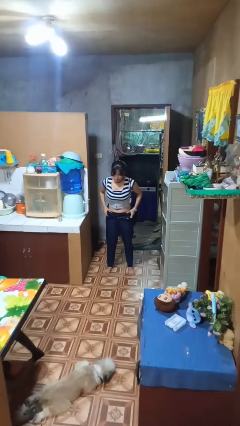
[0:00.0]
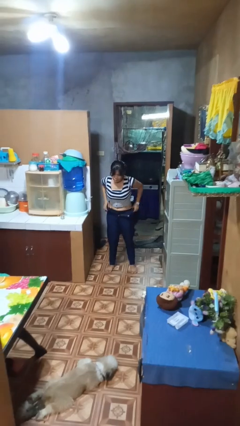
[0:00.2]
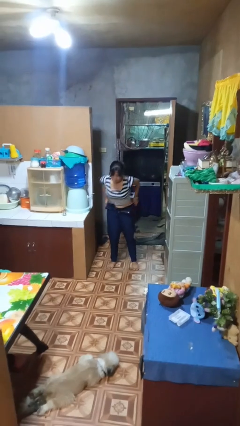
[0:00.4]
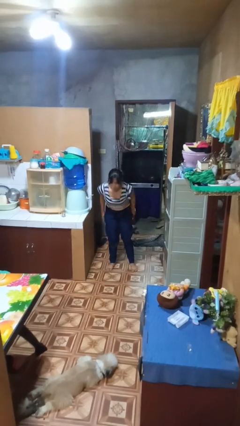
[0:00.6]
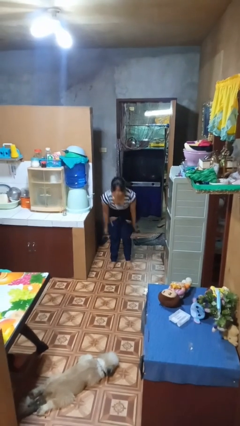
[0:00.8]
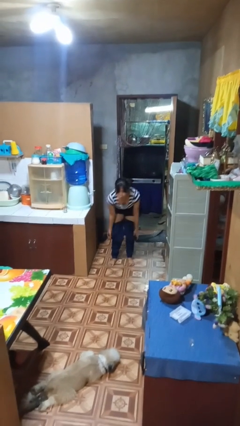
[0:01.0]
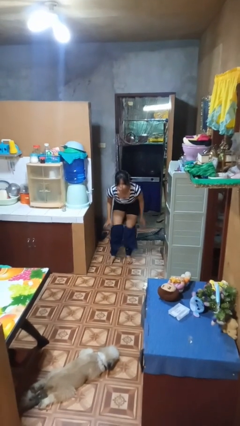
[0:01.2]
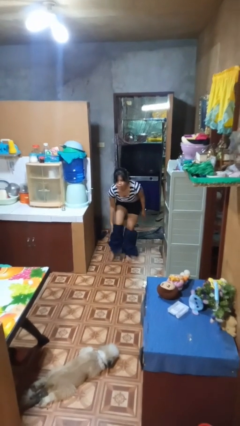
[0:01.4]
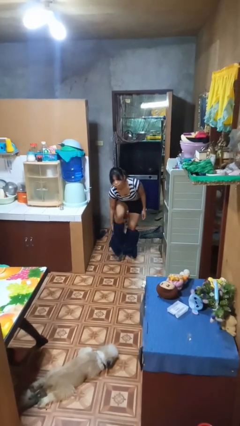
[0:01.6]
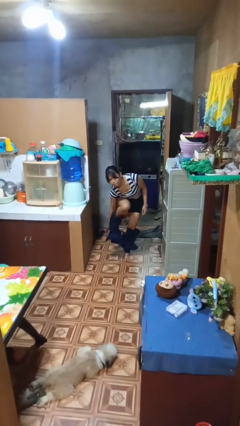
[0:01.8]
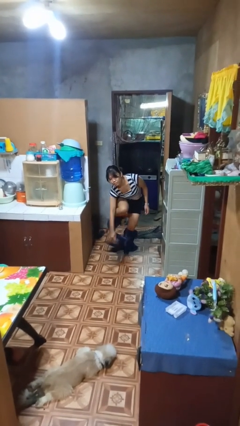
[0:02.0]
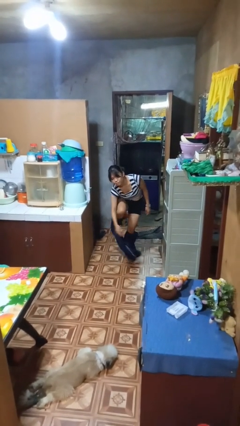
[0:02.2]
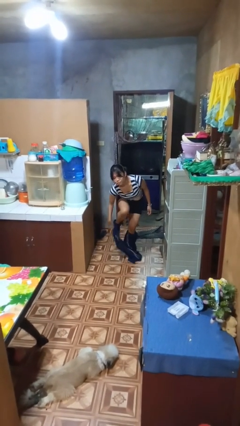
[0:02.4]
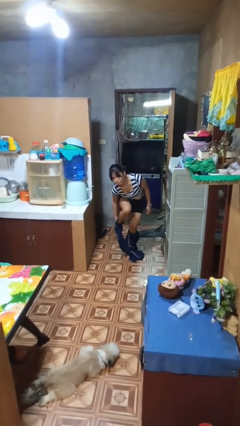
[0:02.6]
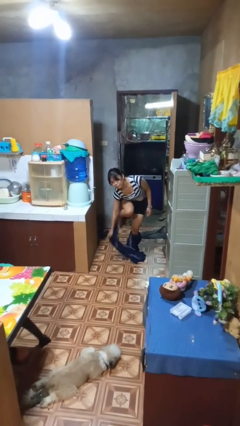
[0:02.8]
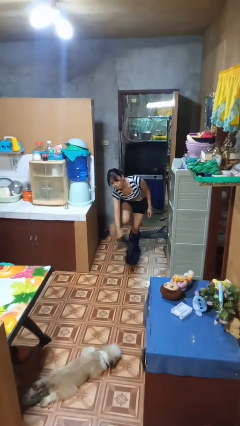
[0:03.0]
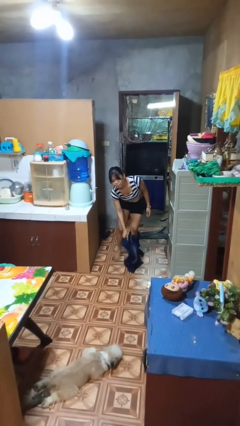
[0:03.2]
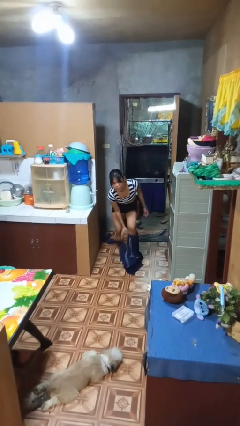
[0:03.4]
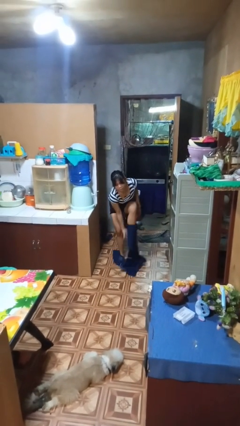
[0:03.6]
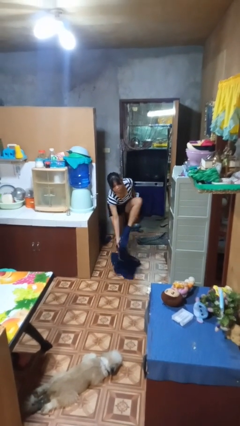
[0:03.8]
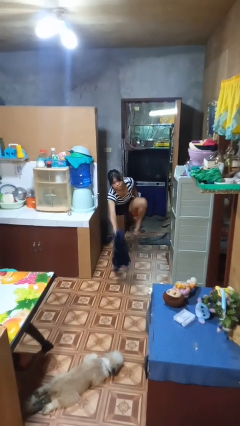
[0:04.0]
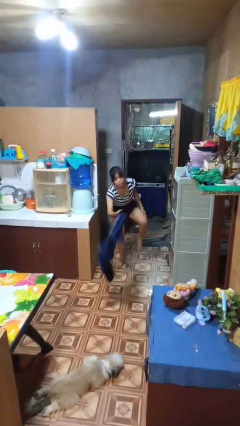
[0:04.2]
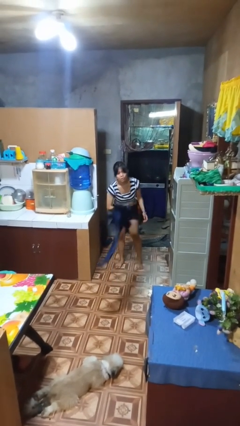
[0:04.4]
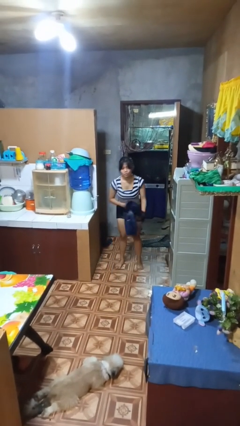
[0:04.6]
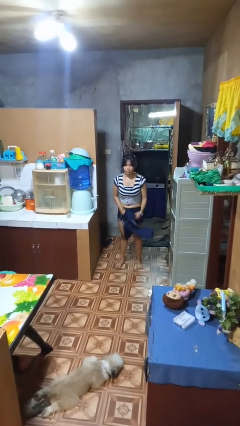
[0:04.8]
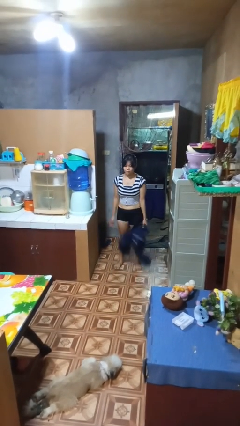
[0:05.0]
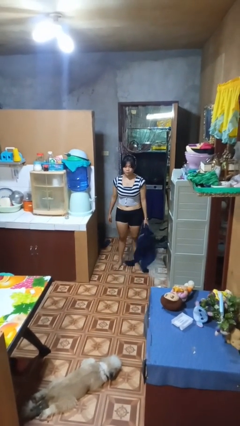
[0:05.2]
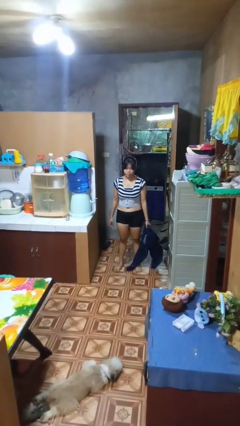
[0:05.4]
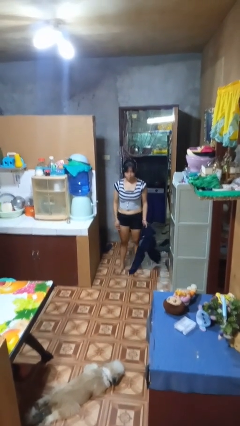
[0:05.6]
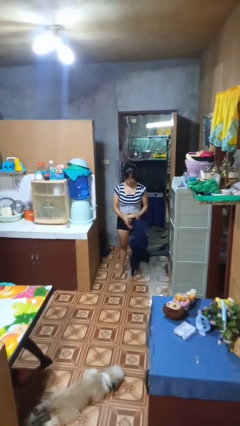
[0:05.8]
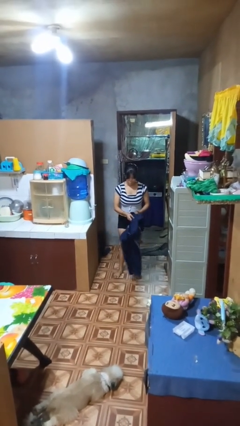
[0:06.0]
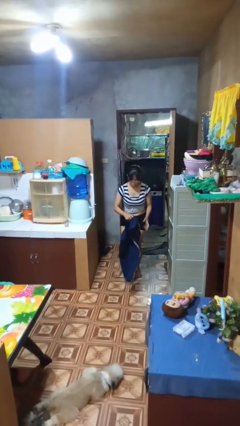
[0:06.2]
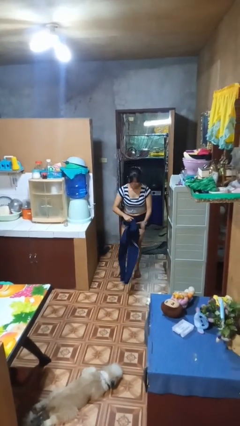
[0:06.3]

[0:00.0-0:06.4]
person takes off pants

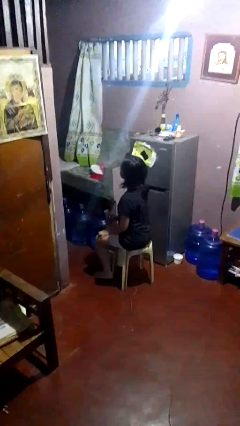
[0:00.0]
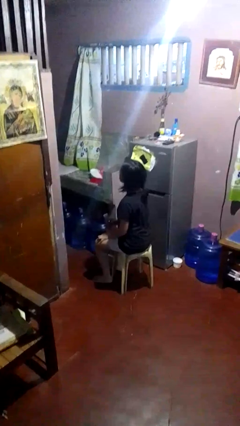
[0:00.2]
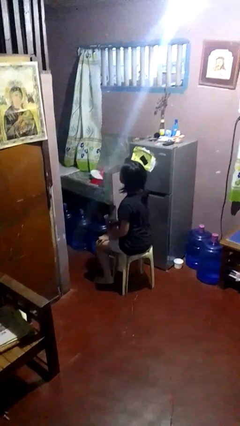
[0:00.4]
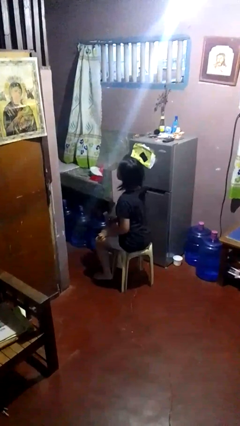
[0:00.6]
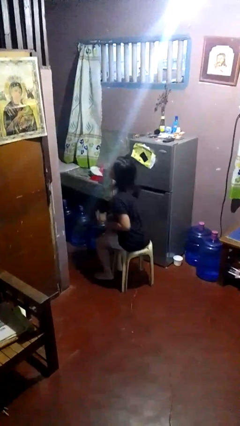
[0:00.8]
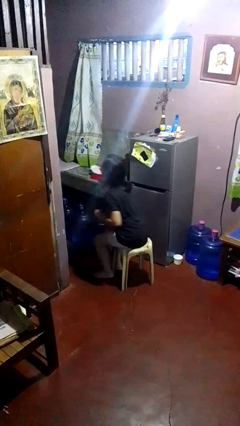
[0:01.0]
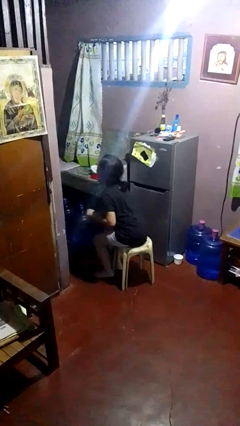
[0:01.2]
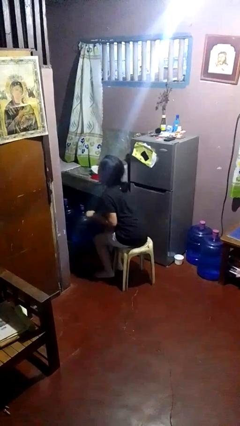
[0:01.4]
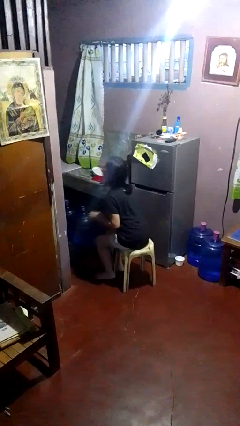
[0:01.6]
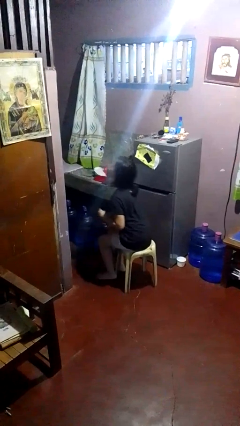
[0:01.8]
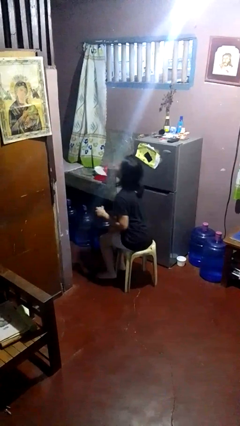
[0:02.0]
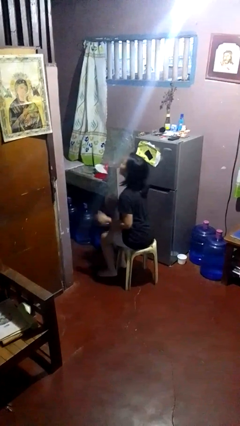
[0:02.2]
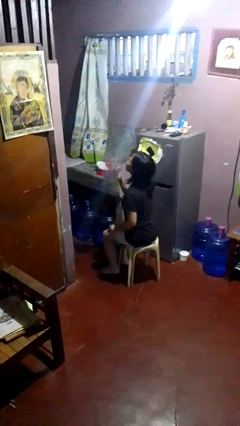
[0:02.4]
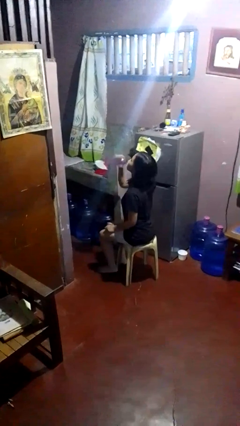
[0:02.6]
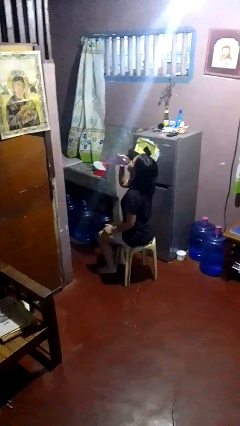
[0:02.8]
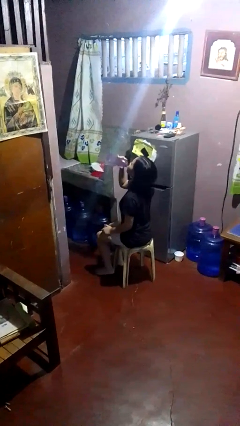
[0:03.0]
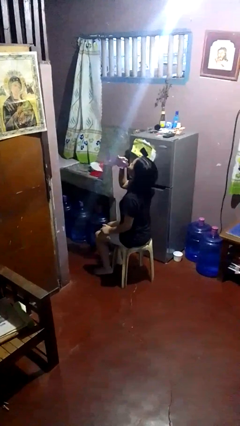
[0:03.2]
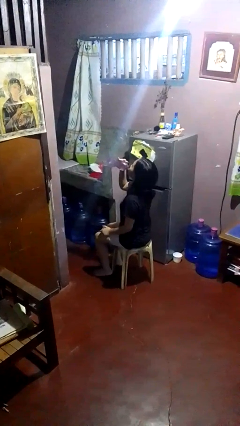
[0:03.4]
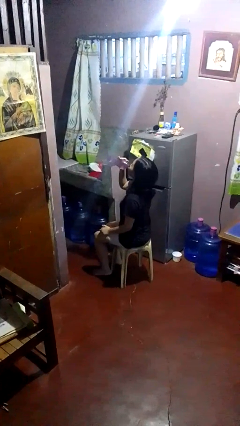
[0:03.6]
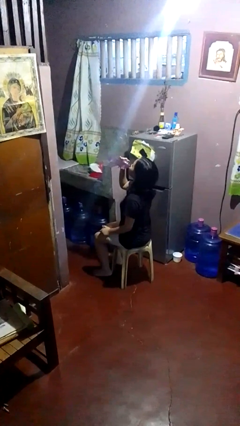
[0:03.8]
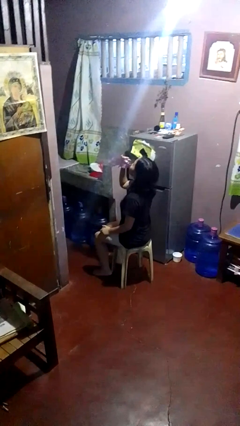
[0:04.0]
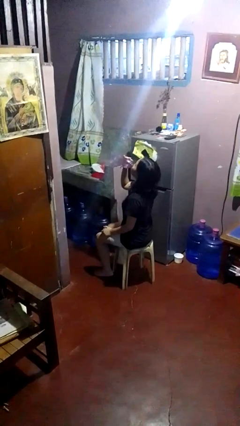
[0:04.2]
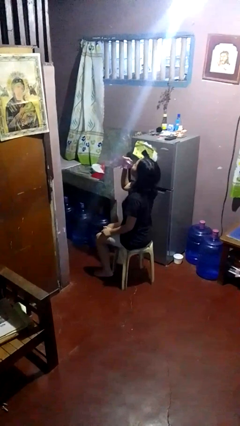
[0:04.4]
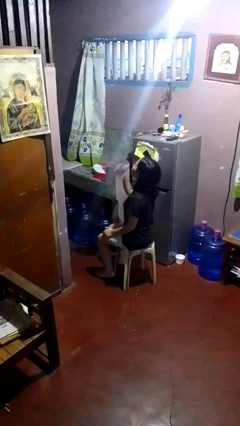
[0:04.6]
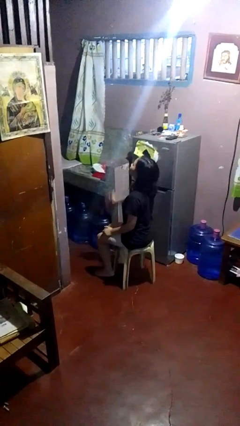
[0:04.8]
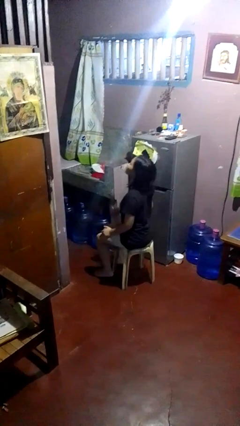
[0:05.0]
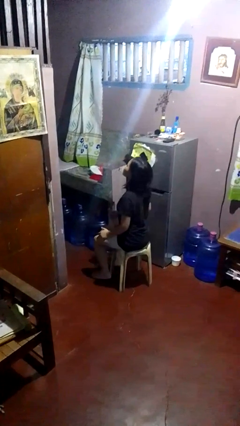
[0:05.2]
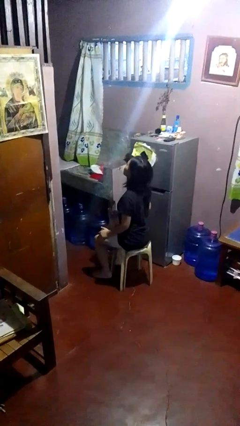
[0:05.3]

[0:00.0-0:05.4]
person drinks from bottle

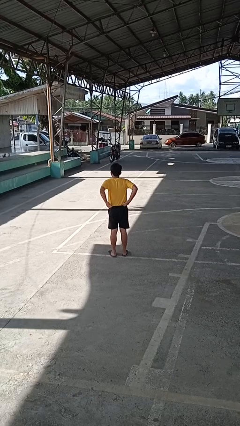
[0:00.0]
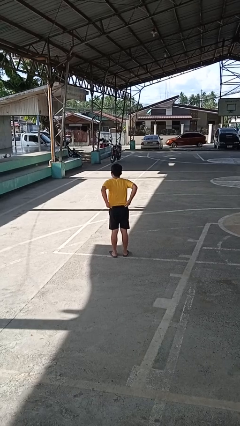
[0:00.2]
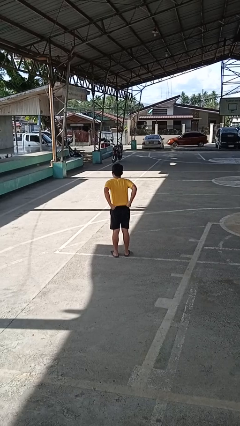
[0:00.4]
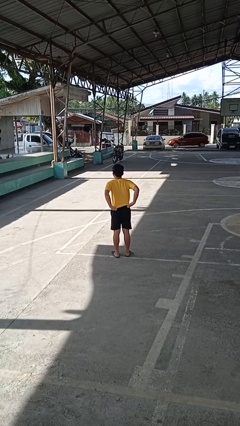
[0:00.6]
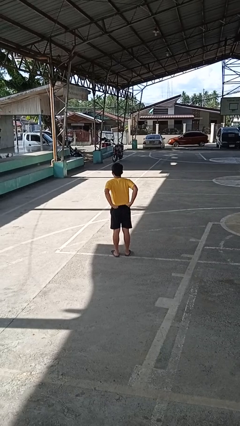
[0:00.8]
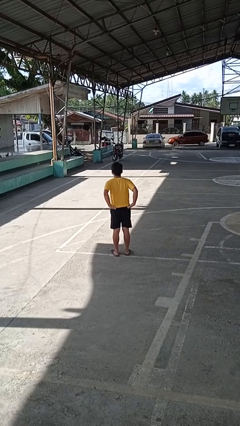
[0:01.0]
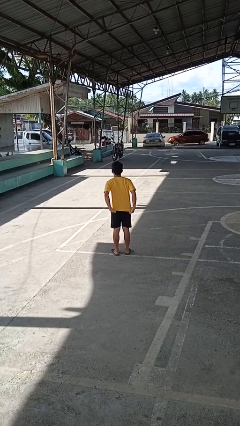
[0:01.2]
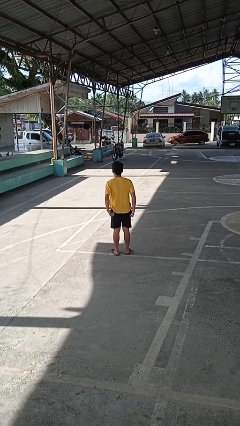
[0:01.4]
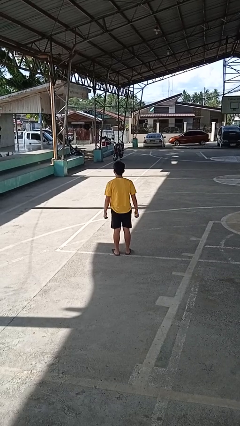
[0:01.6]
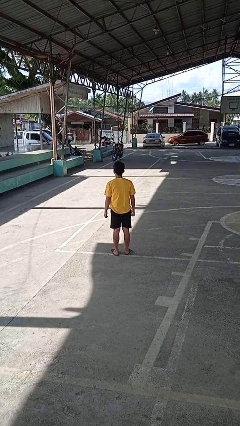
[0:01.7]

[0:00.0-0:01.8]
person untucks shirt

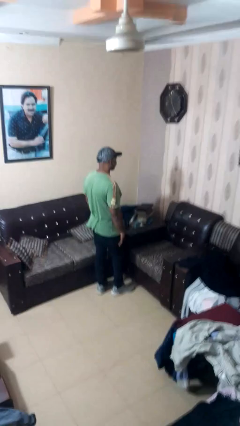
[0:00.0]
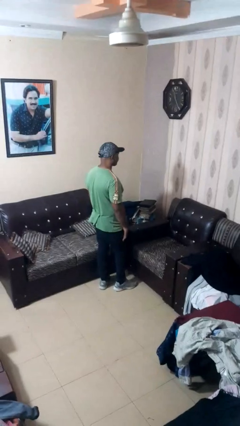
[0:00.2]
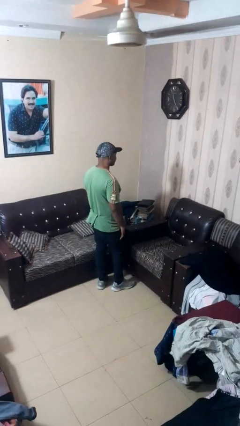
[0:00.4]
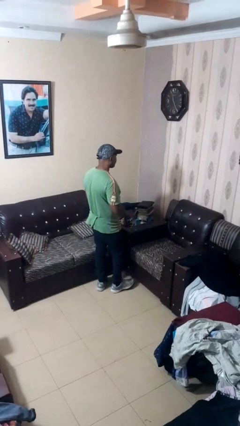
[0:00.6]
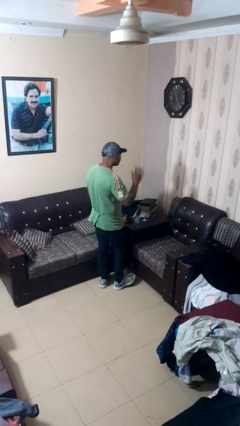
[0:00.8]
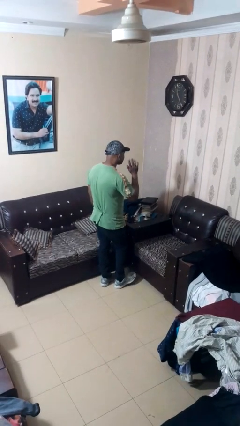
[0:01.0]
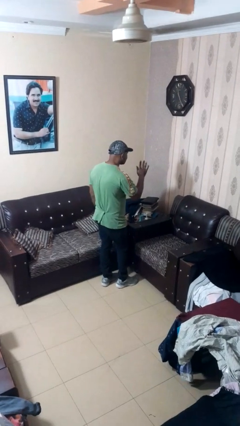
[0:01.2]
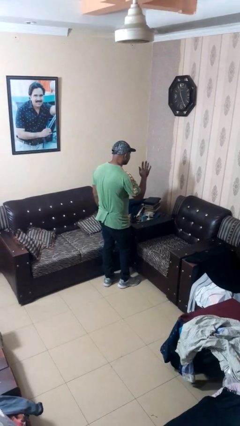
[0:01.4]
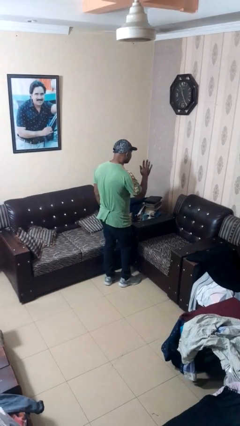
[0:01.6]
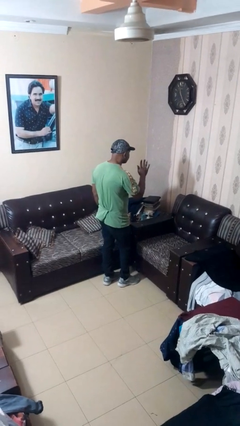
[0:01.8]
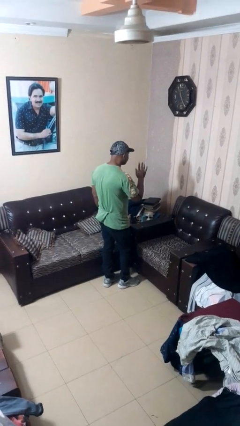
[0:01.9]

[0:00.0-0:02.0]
person gestures stop

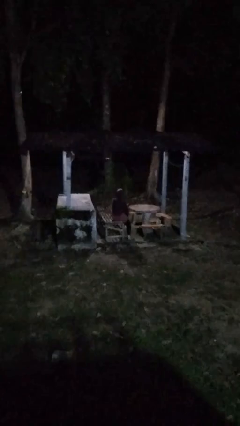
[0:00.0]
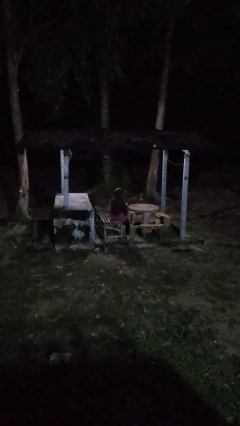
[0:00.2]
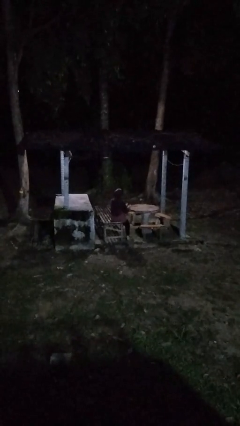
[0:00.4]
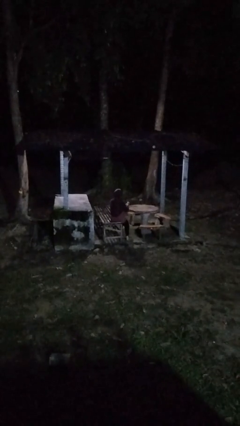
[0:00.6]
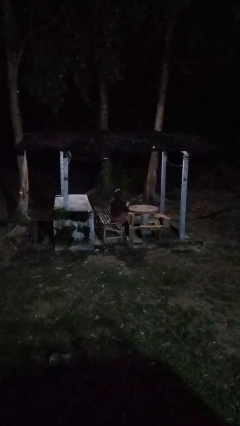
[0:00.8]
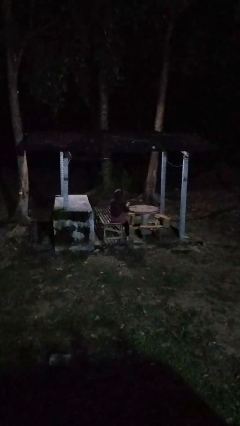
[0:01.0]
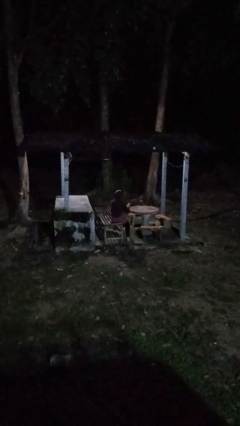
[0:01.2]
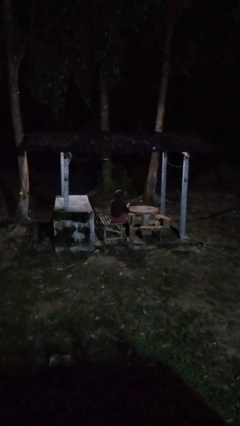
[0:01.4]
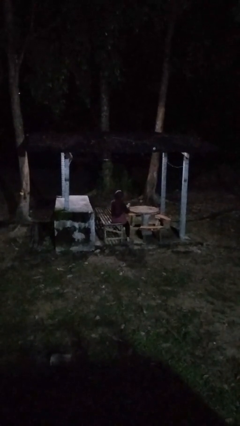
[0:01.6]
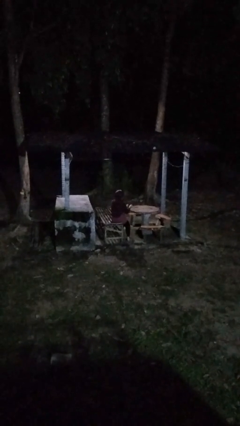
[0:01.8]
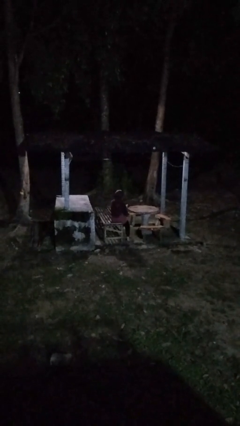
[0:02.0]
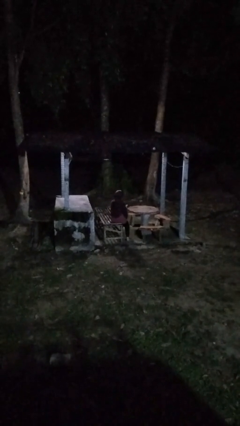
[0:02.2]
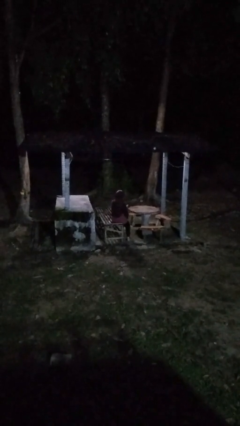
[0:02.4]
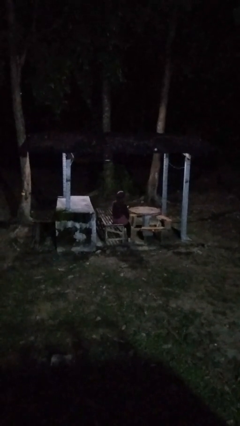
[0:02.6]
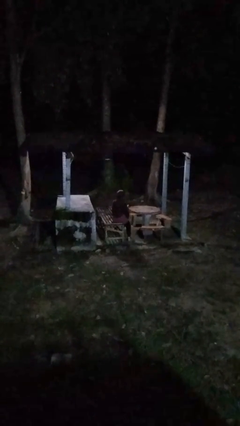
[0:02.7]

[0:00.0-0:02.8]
person paints fingernails
